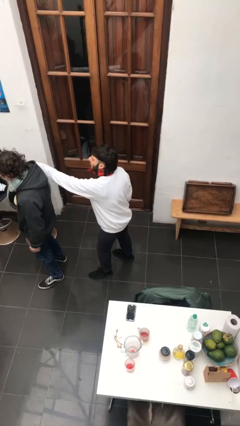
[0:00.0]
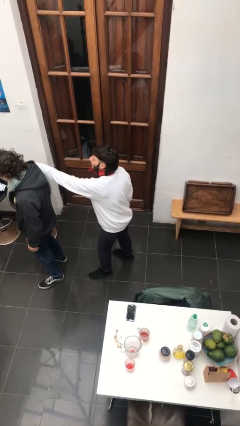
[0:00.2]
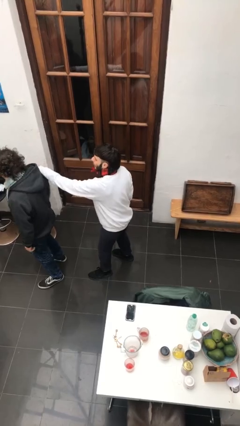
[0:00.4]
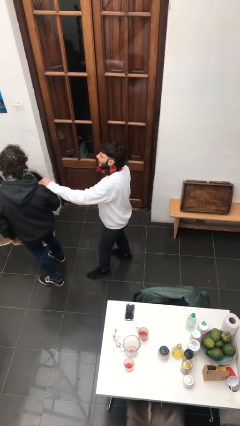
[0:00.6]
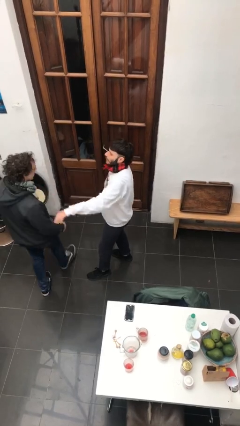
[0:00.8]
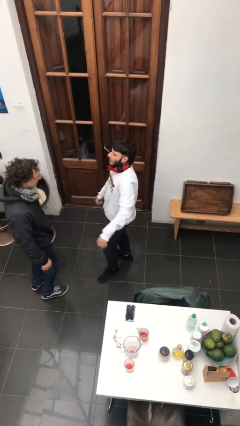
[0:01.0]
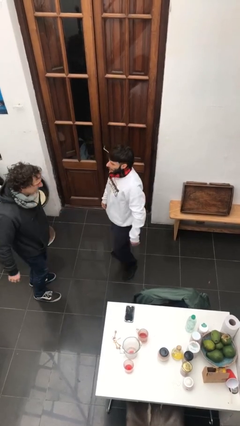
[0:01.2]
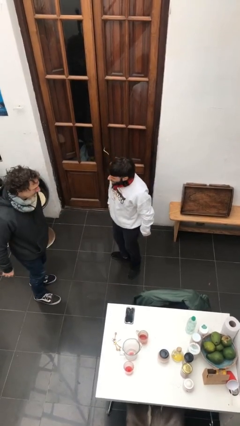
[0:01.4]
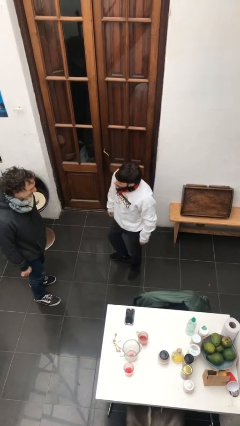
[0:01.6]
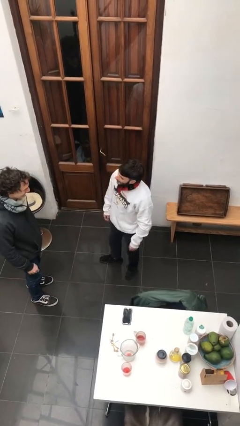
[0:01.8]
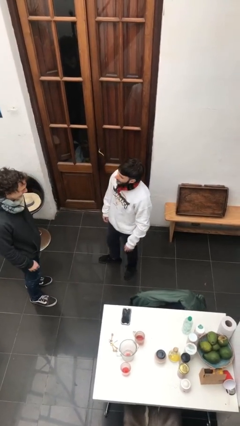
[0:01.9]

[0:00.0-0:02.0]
person spins person around

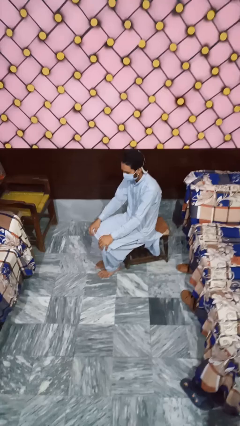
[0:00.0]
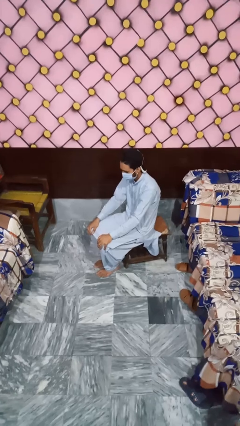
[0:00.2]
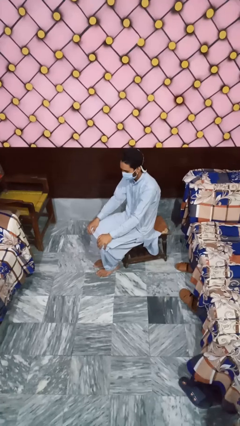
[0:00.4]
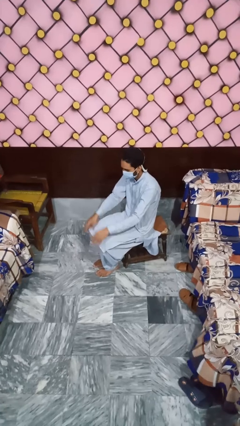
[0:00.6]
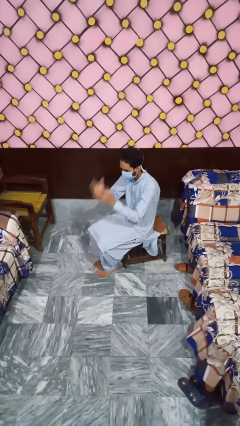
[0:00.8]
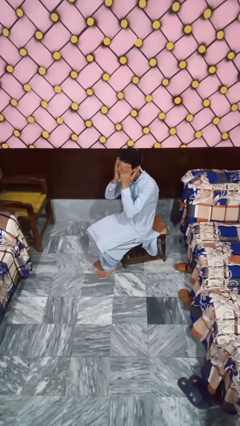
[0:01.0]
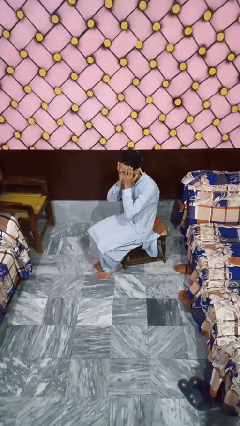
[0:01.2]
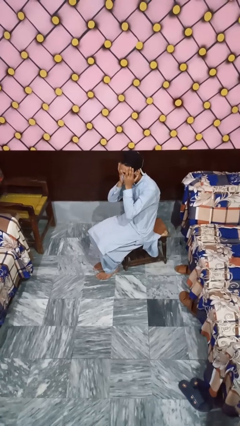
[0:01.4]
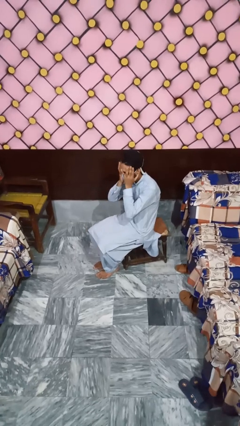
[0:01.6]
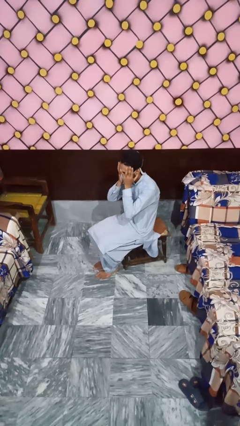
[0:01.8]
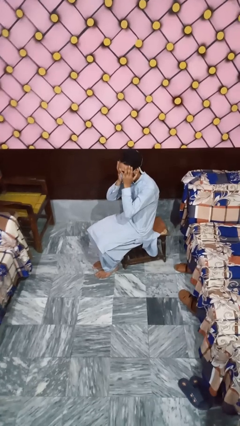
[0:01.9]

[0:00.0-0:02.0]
person covers face with hands

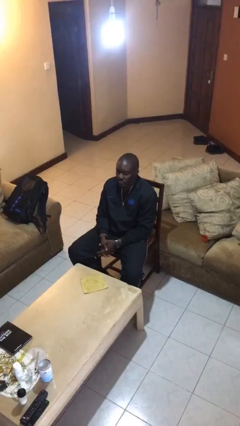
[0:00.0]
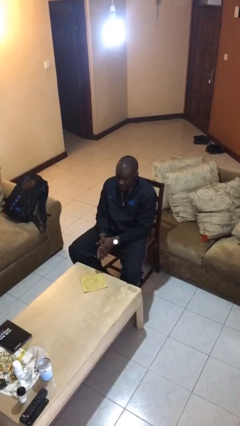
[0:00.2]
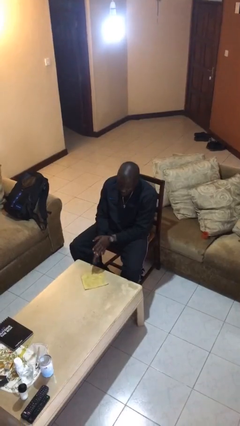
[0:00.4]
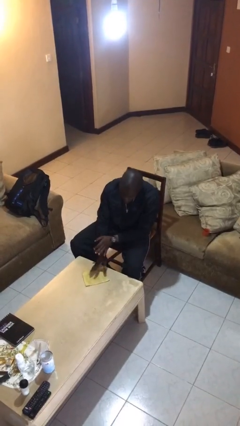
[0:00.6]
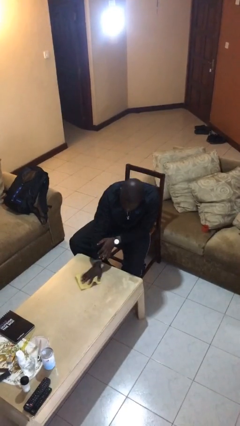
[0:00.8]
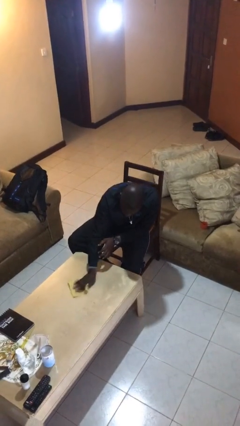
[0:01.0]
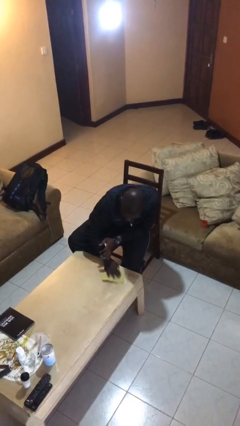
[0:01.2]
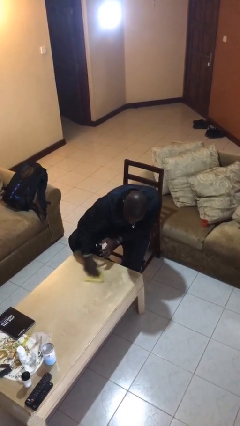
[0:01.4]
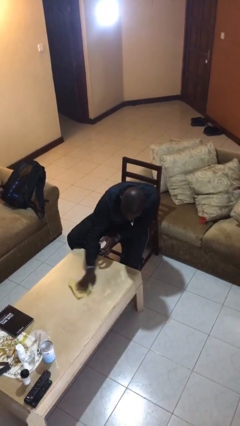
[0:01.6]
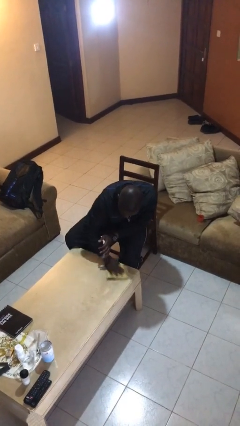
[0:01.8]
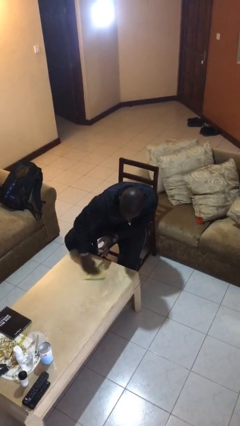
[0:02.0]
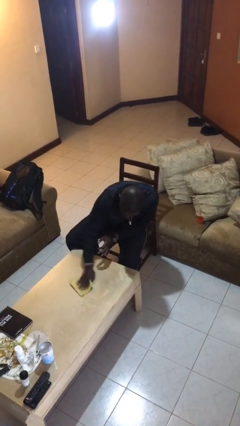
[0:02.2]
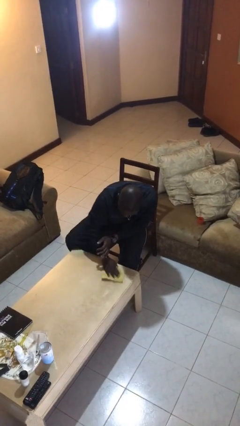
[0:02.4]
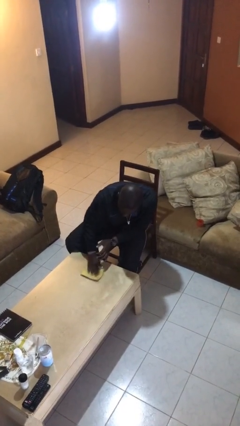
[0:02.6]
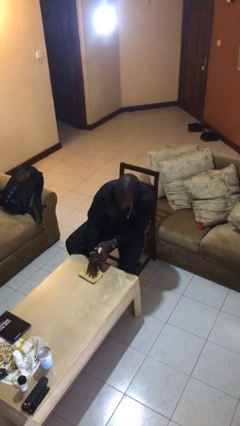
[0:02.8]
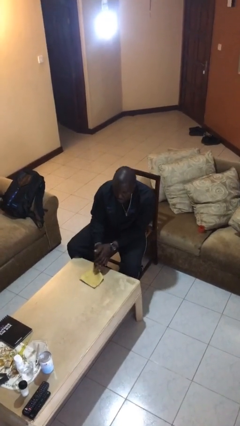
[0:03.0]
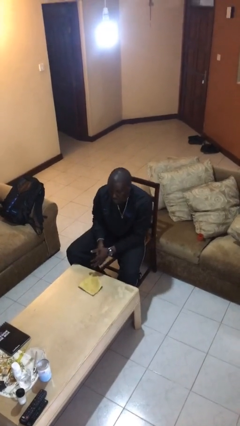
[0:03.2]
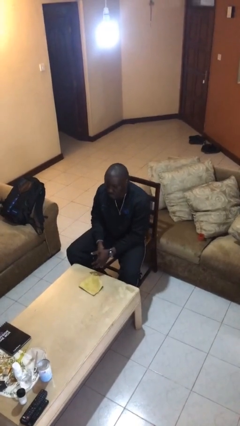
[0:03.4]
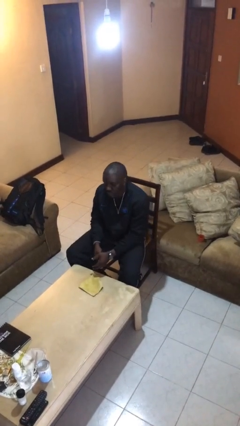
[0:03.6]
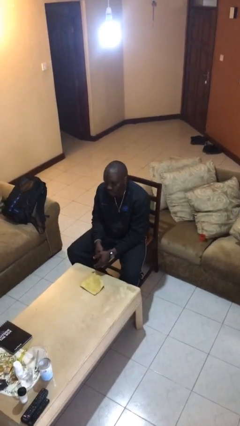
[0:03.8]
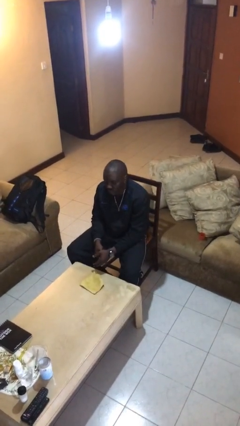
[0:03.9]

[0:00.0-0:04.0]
person cleans table with rag

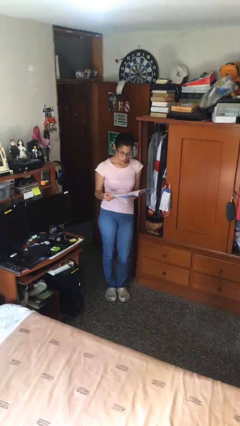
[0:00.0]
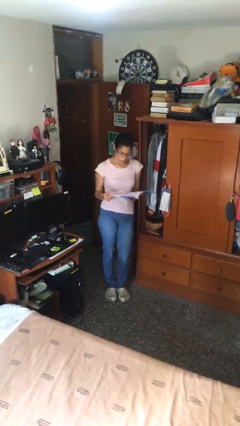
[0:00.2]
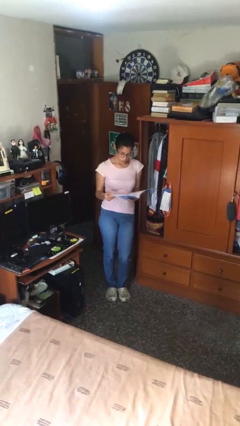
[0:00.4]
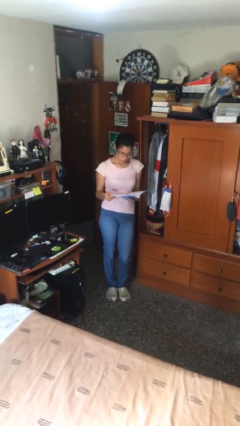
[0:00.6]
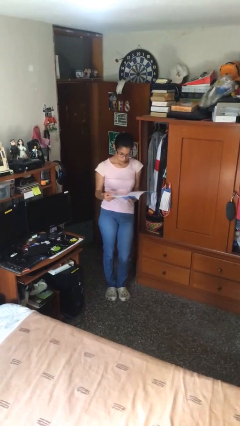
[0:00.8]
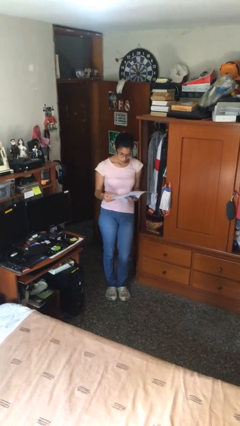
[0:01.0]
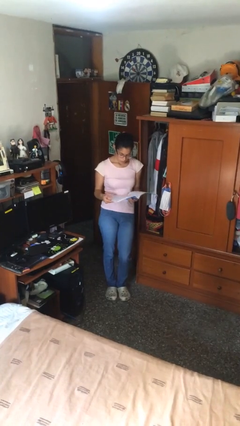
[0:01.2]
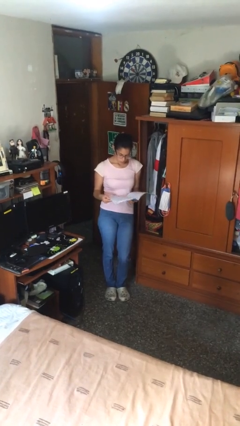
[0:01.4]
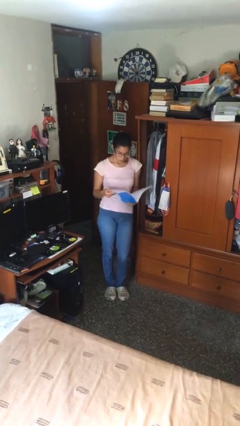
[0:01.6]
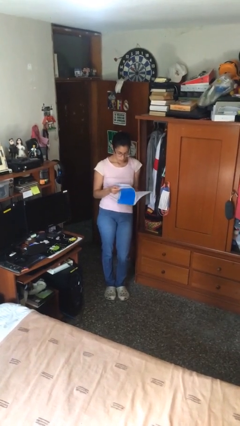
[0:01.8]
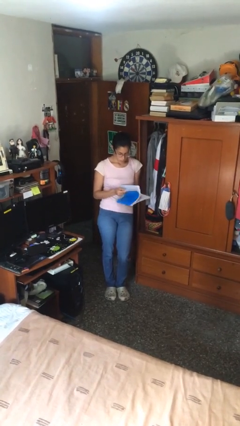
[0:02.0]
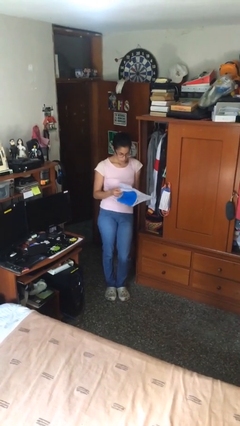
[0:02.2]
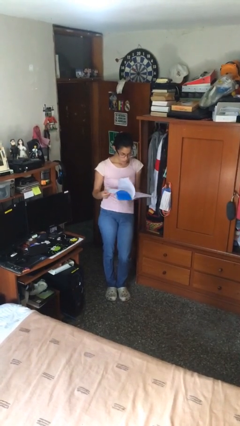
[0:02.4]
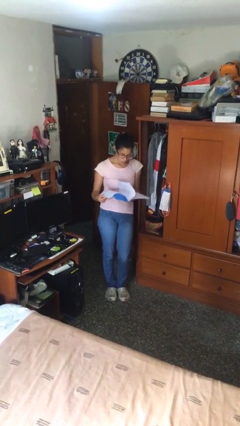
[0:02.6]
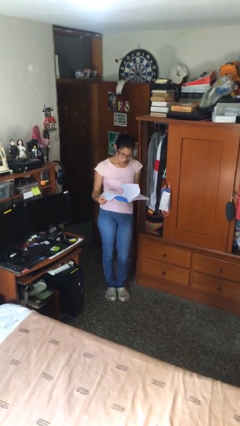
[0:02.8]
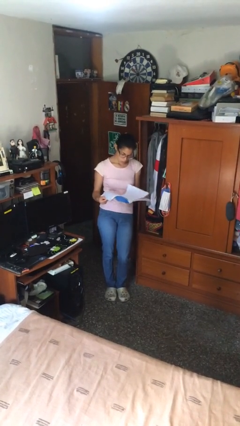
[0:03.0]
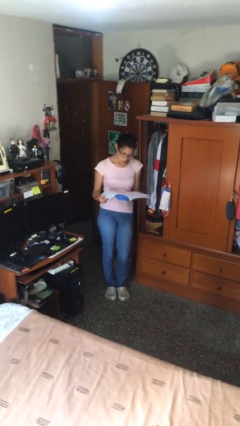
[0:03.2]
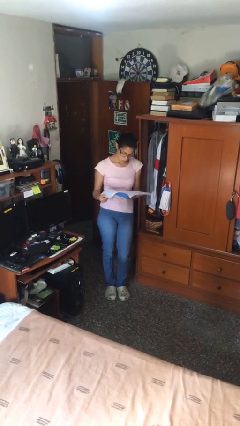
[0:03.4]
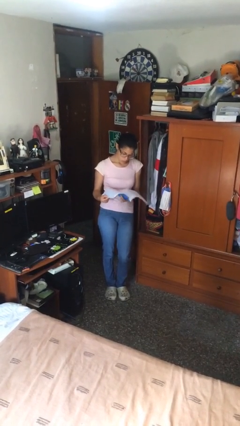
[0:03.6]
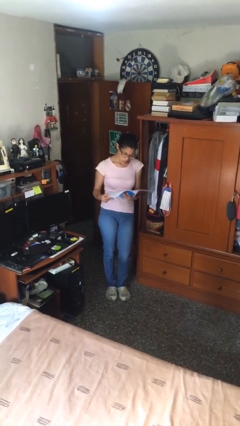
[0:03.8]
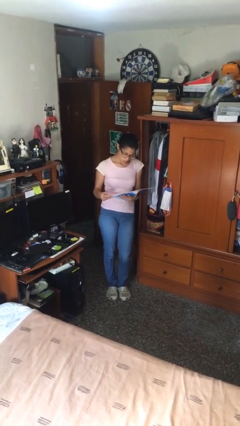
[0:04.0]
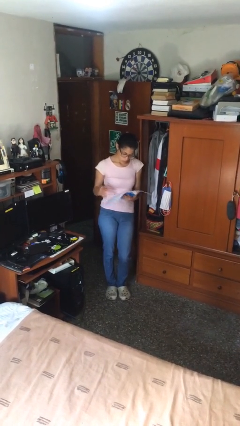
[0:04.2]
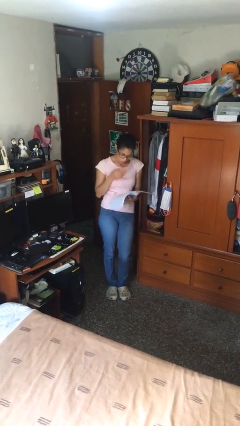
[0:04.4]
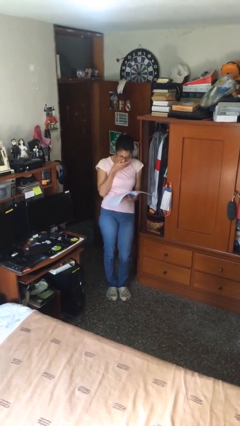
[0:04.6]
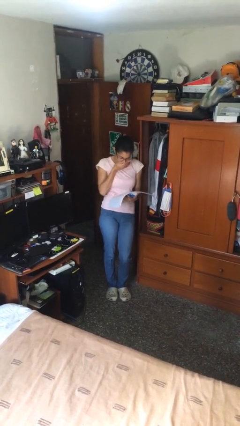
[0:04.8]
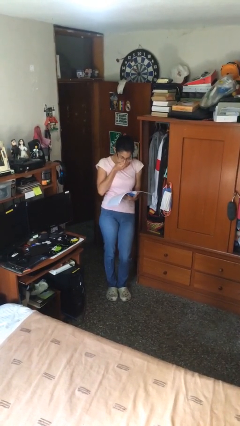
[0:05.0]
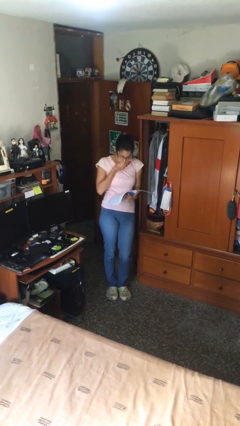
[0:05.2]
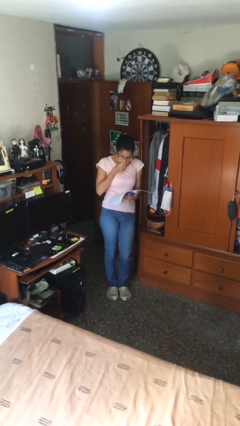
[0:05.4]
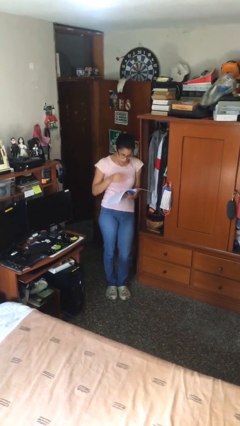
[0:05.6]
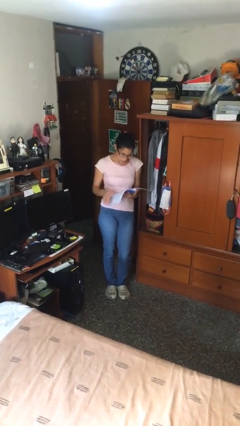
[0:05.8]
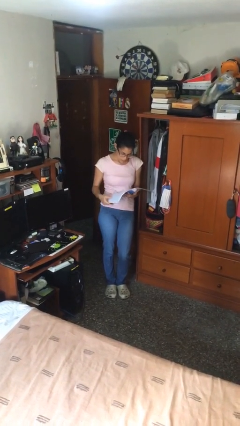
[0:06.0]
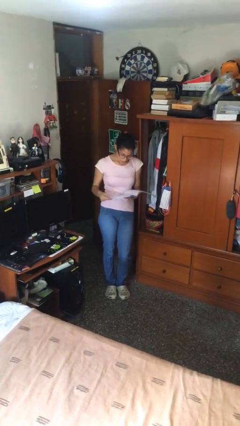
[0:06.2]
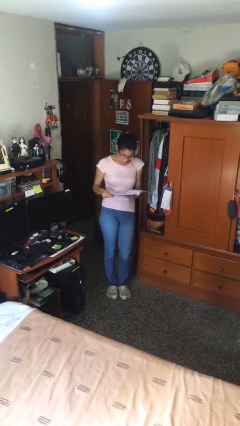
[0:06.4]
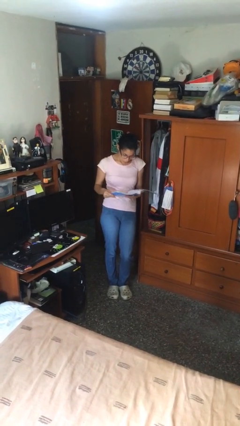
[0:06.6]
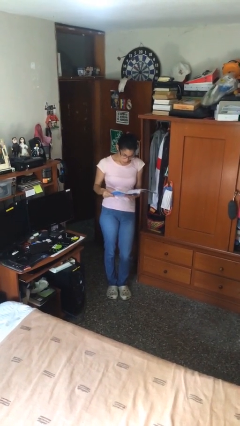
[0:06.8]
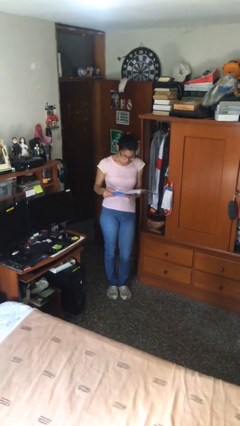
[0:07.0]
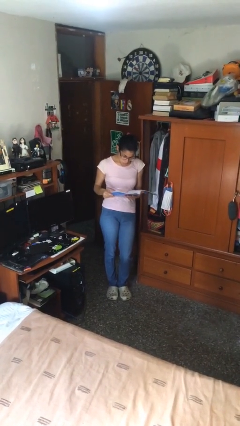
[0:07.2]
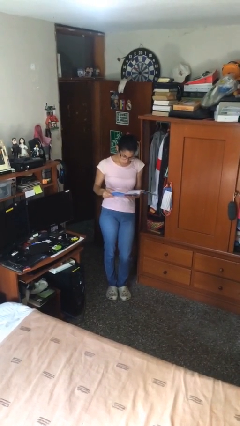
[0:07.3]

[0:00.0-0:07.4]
person reads document

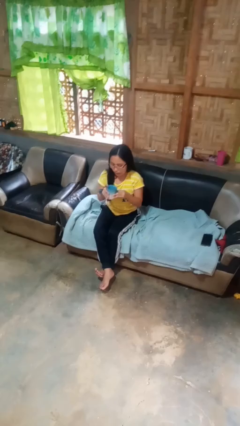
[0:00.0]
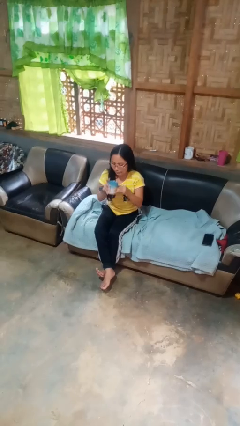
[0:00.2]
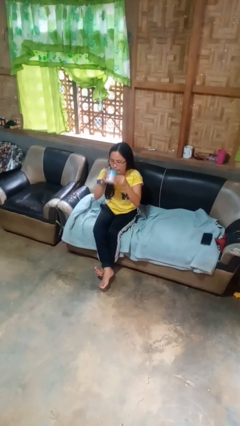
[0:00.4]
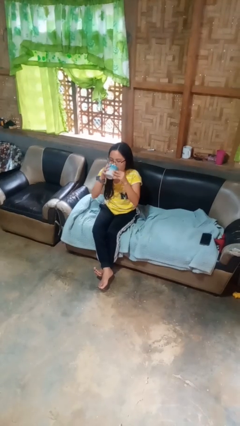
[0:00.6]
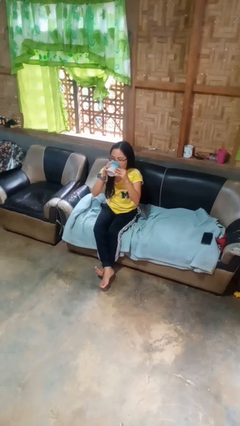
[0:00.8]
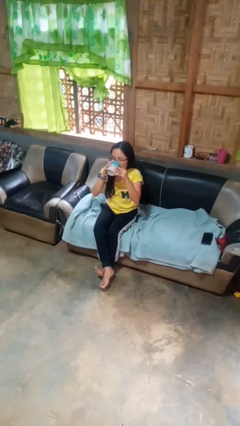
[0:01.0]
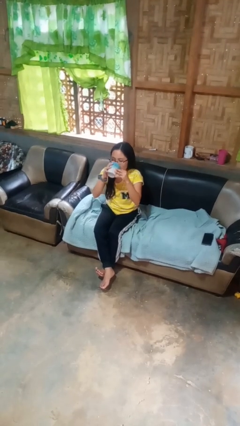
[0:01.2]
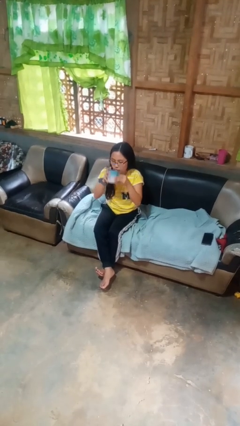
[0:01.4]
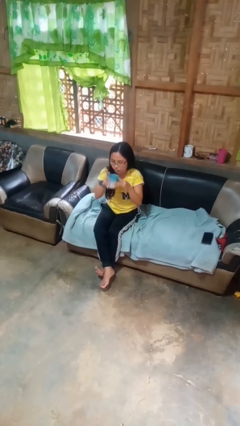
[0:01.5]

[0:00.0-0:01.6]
person drinks from mug

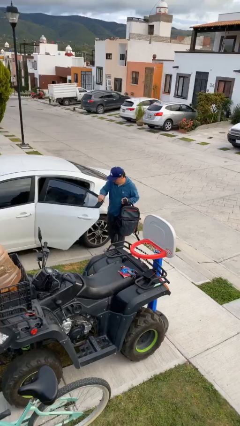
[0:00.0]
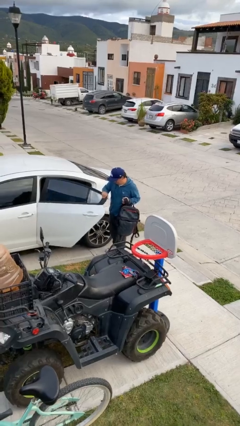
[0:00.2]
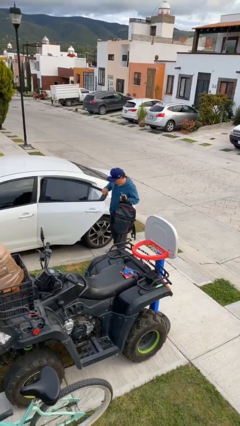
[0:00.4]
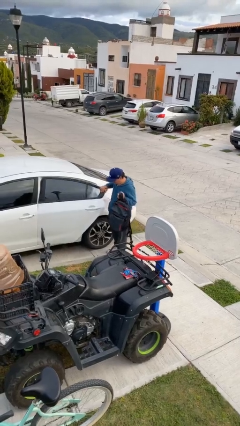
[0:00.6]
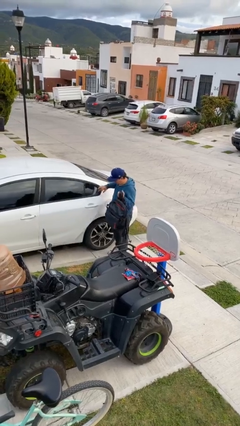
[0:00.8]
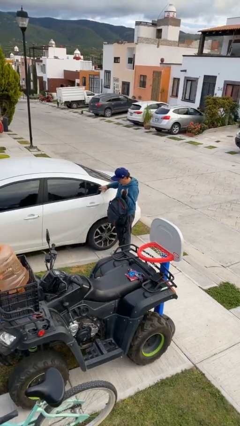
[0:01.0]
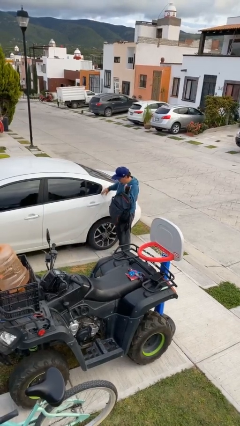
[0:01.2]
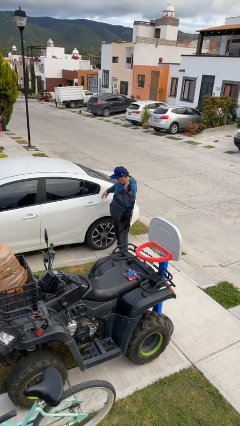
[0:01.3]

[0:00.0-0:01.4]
person closes car door
